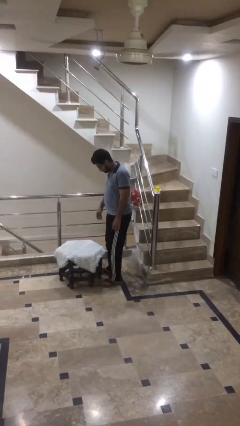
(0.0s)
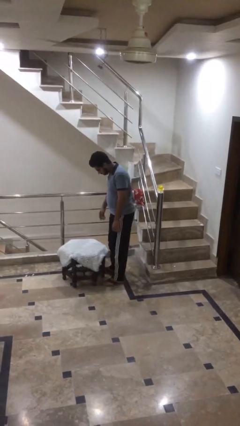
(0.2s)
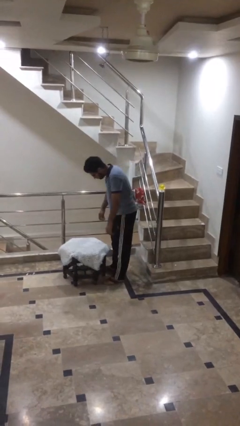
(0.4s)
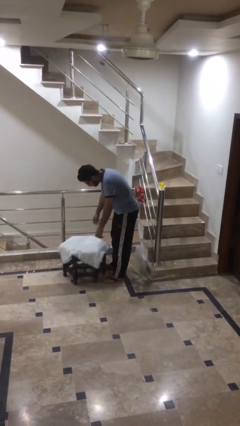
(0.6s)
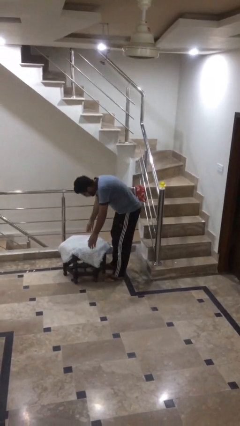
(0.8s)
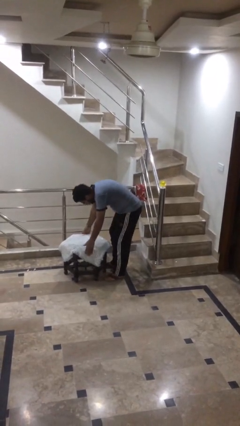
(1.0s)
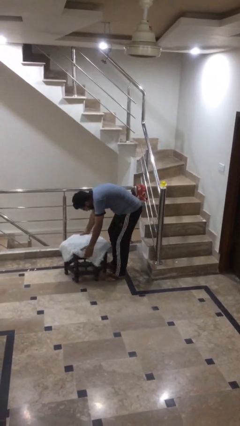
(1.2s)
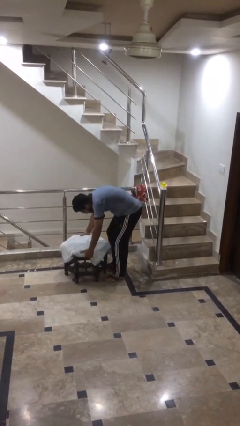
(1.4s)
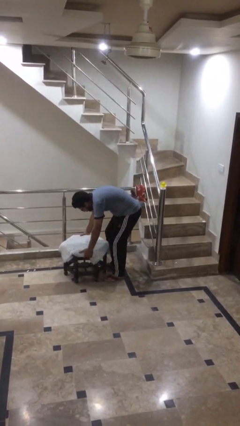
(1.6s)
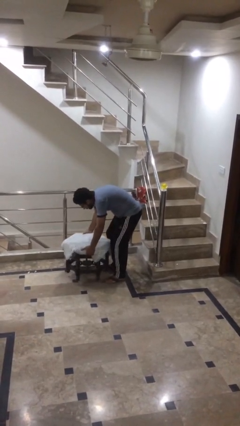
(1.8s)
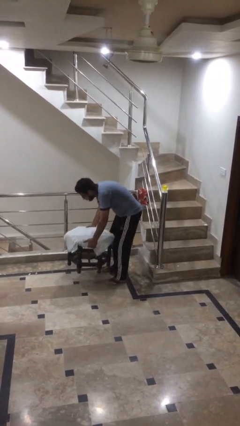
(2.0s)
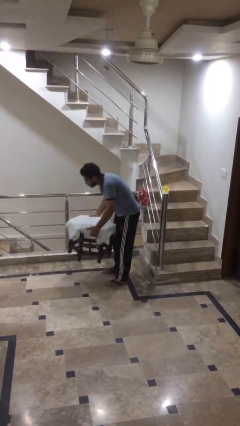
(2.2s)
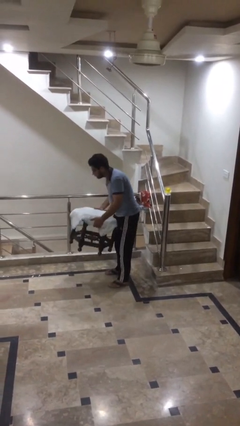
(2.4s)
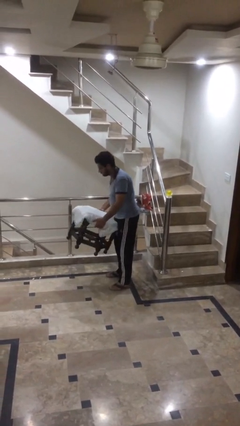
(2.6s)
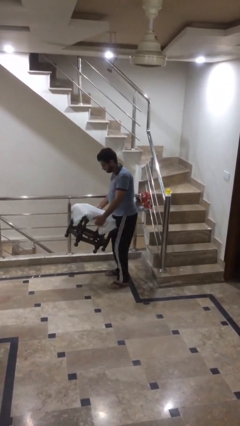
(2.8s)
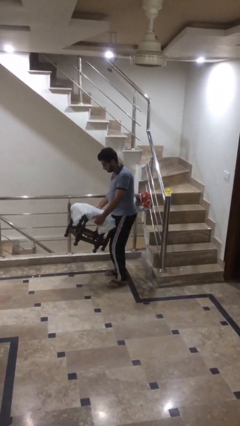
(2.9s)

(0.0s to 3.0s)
person picks up object from floor

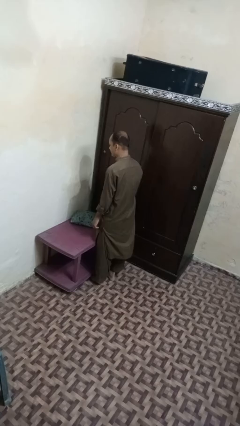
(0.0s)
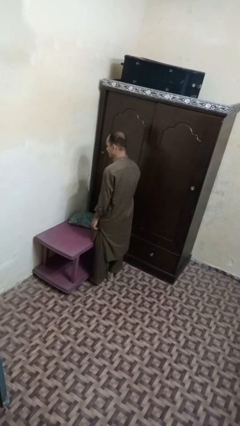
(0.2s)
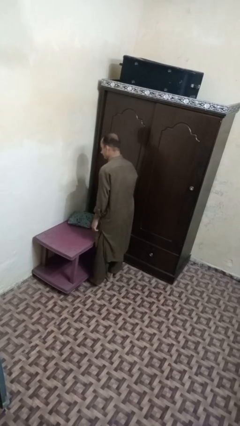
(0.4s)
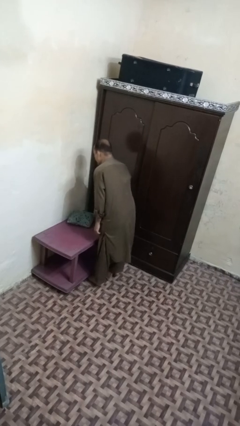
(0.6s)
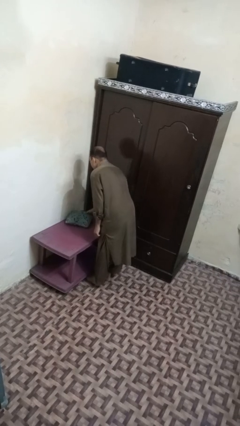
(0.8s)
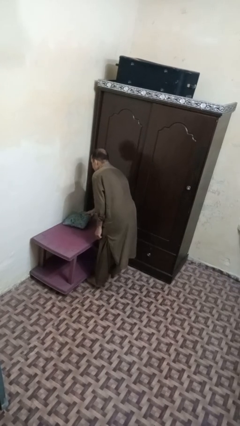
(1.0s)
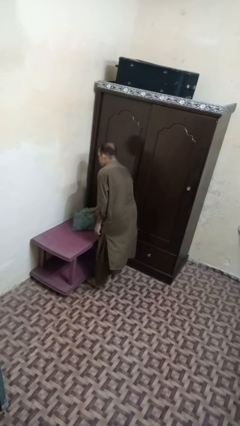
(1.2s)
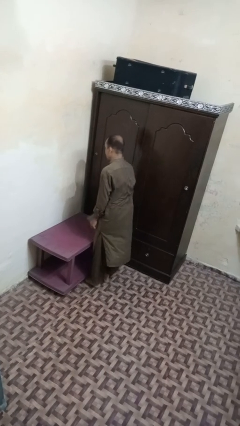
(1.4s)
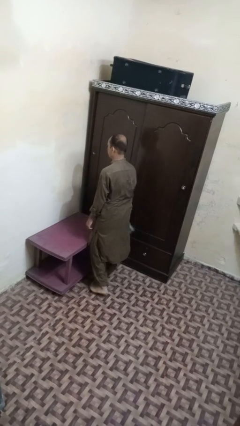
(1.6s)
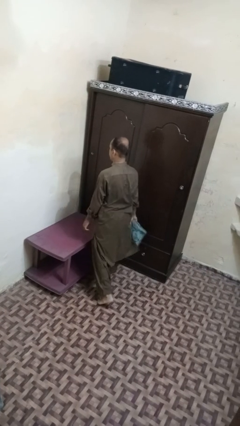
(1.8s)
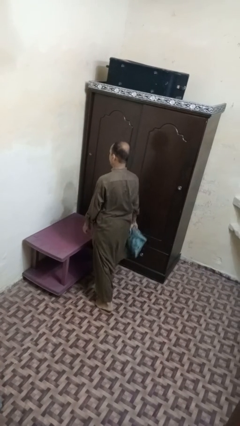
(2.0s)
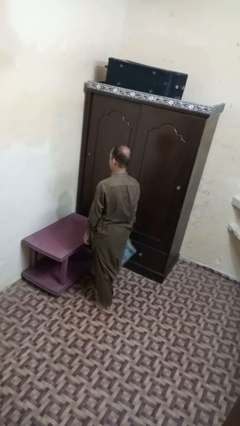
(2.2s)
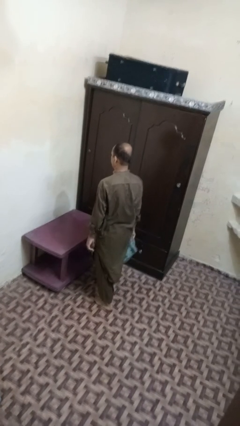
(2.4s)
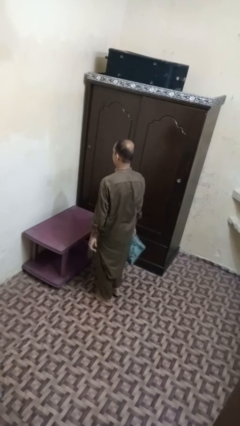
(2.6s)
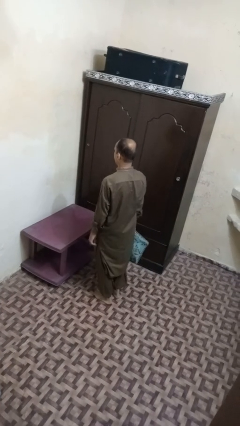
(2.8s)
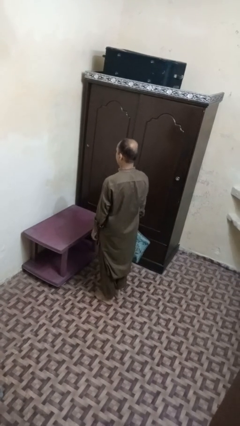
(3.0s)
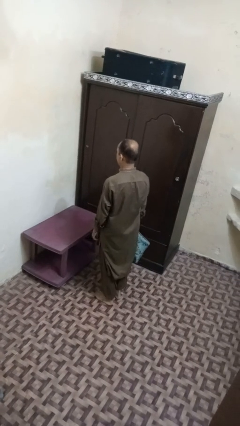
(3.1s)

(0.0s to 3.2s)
person picks up object from table

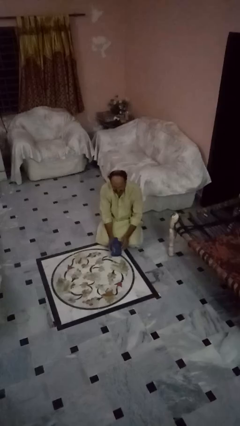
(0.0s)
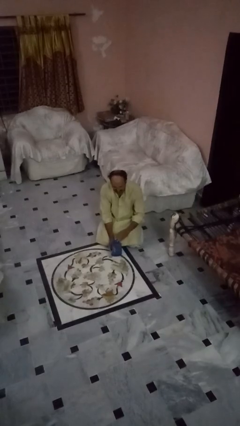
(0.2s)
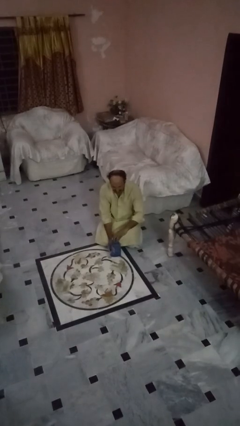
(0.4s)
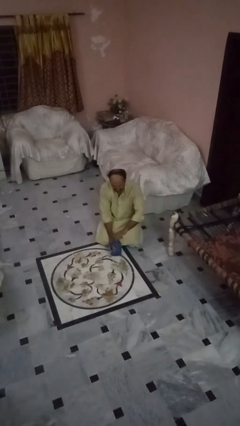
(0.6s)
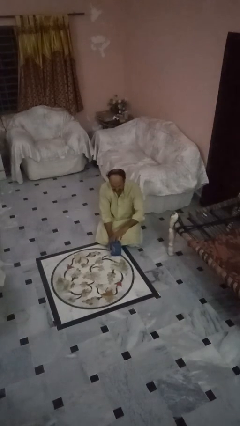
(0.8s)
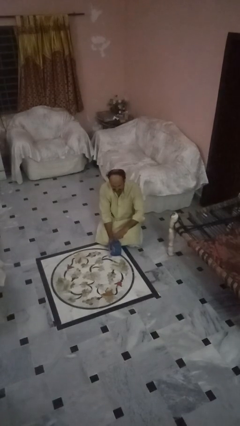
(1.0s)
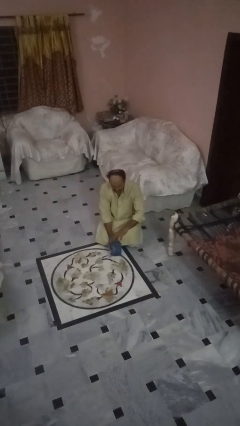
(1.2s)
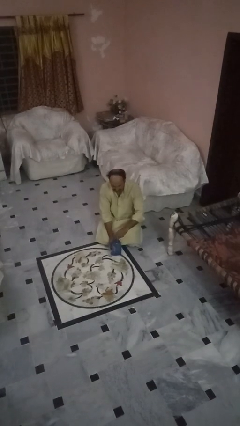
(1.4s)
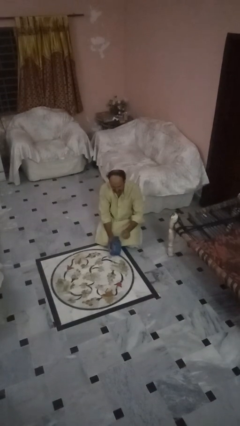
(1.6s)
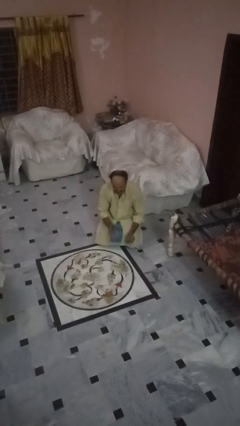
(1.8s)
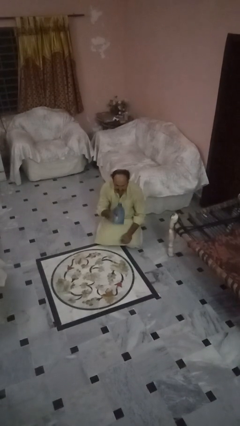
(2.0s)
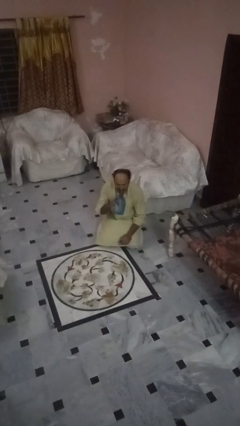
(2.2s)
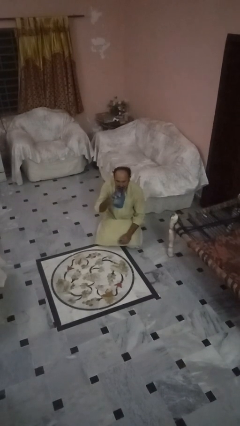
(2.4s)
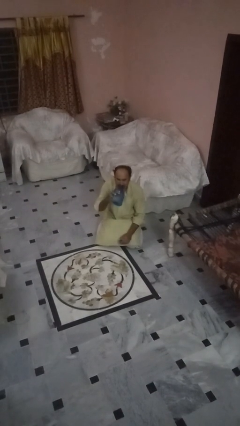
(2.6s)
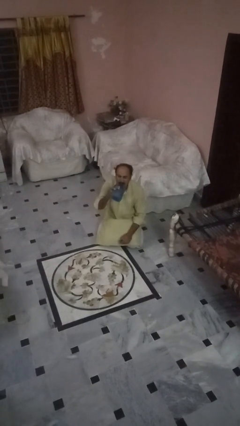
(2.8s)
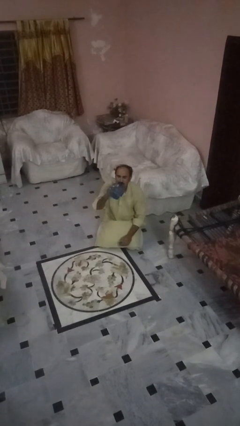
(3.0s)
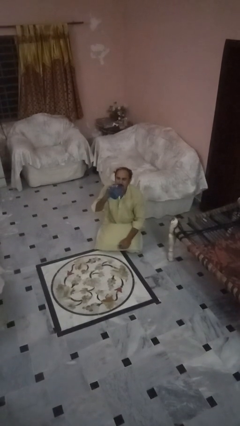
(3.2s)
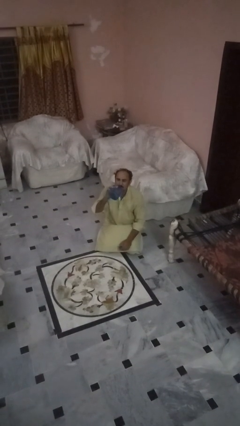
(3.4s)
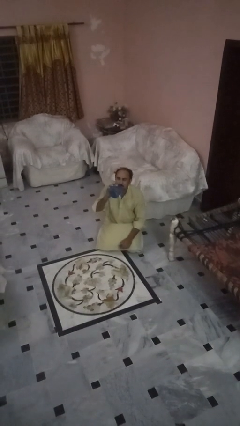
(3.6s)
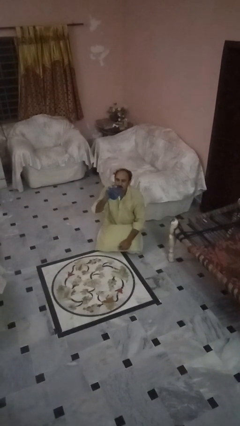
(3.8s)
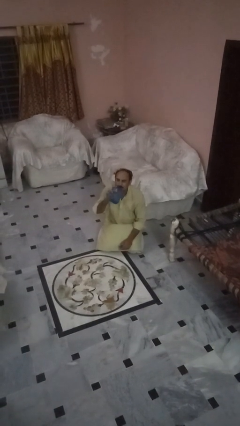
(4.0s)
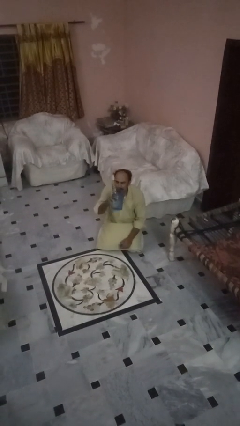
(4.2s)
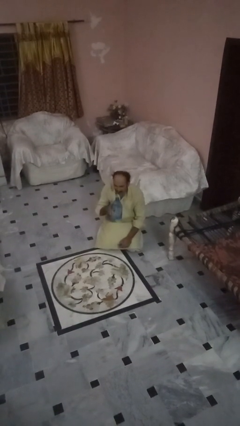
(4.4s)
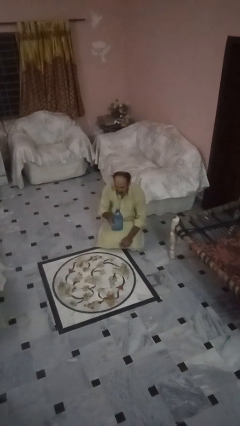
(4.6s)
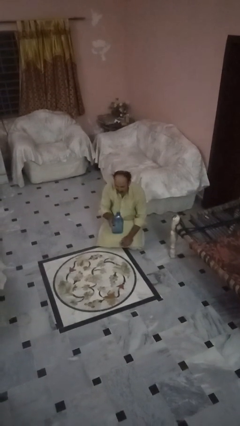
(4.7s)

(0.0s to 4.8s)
person drinks from bottle

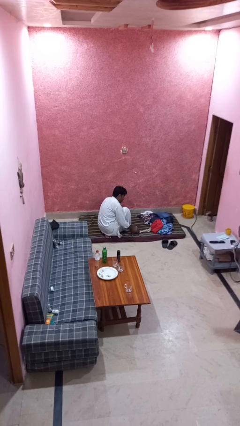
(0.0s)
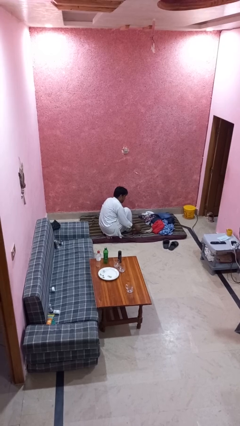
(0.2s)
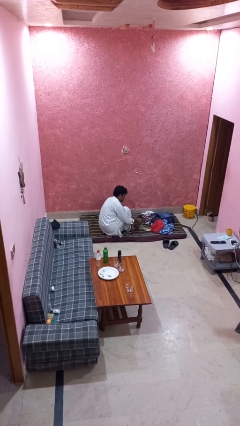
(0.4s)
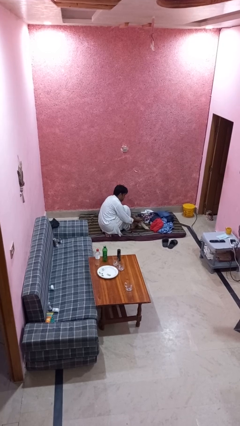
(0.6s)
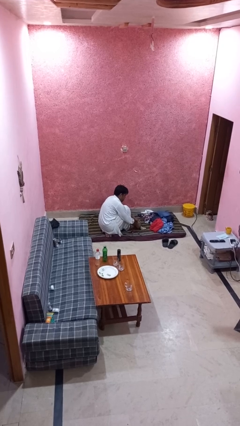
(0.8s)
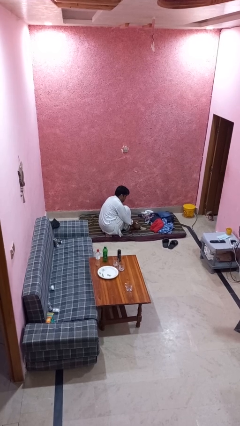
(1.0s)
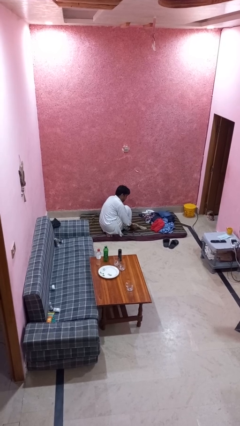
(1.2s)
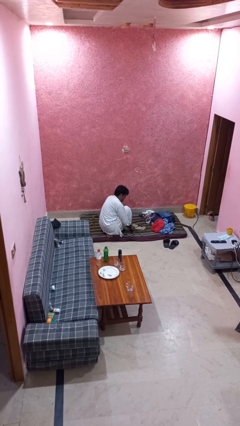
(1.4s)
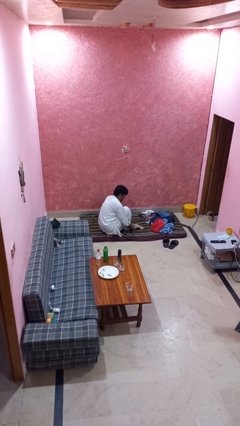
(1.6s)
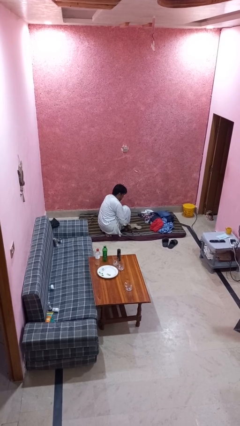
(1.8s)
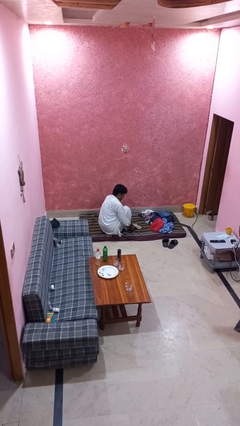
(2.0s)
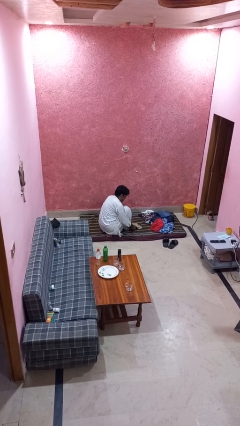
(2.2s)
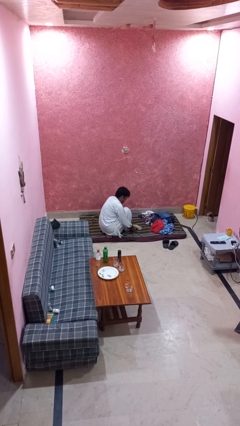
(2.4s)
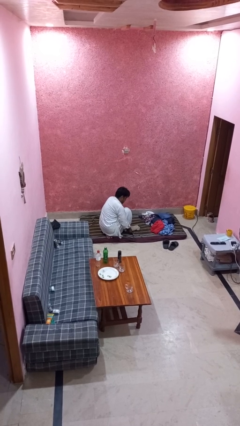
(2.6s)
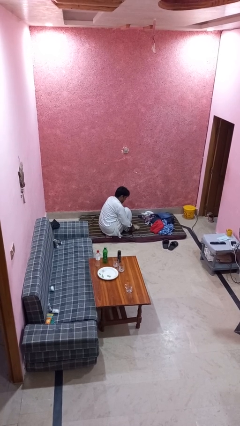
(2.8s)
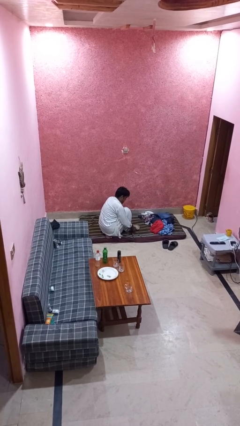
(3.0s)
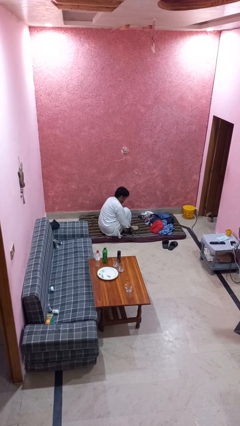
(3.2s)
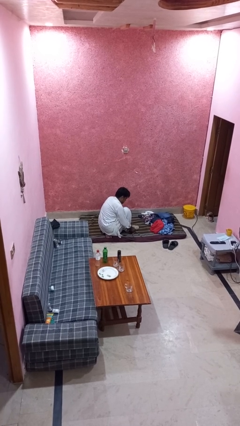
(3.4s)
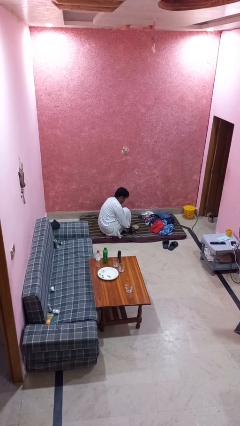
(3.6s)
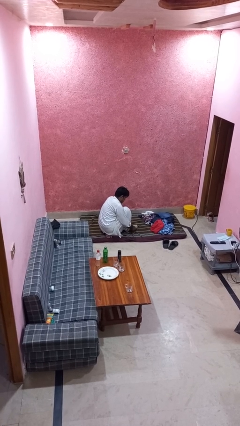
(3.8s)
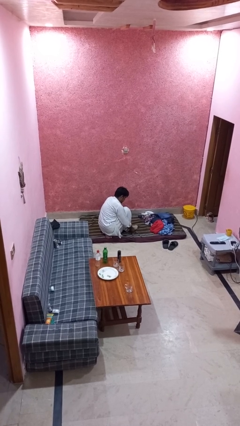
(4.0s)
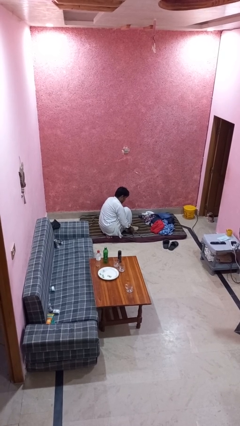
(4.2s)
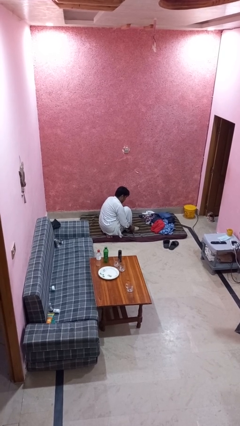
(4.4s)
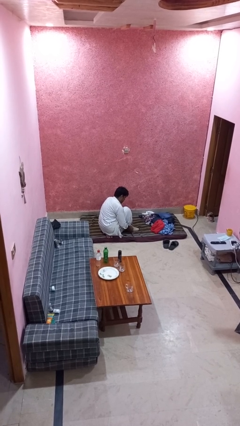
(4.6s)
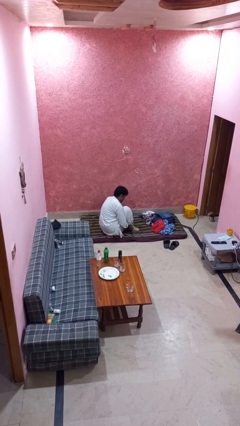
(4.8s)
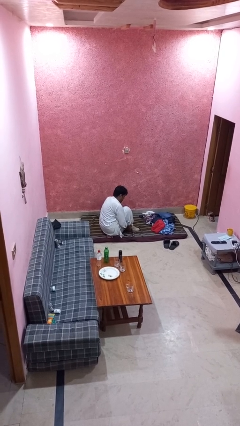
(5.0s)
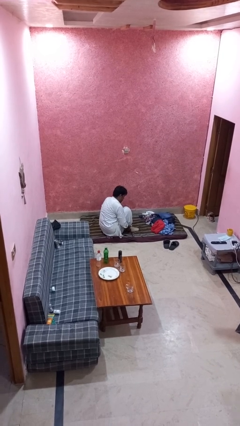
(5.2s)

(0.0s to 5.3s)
person puts on socks

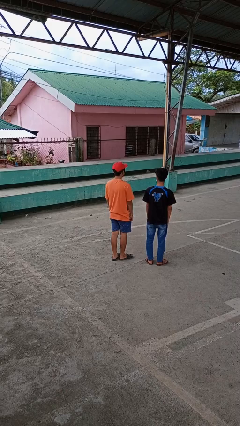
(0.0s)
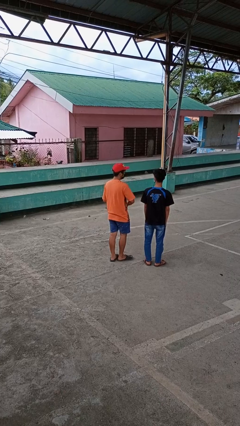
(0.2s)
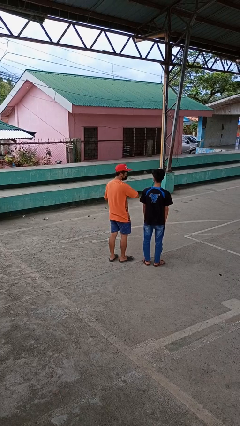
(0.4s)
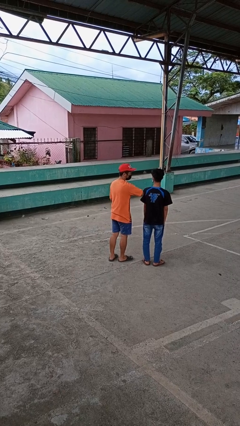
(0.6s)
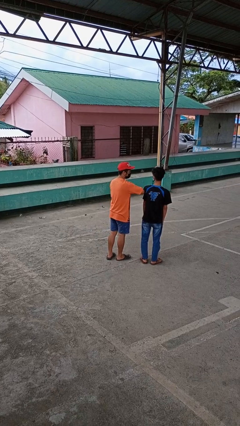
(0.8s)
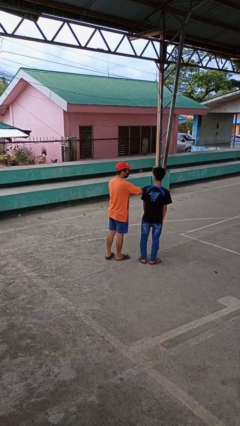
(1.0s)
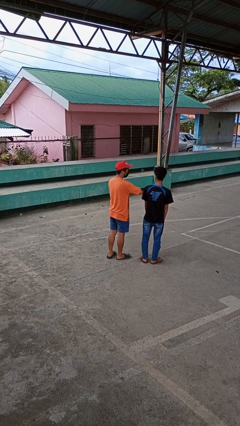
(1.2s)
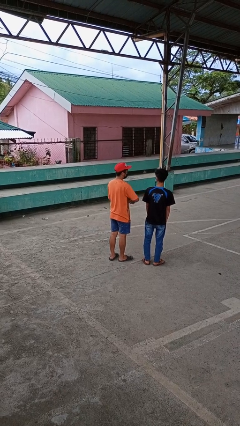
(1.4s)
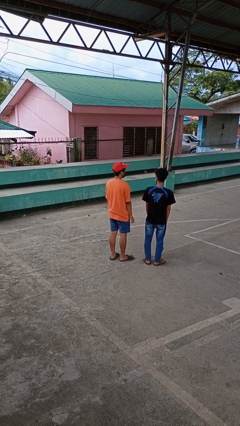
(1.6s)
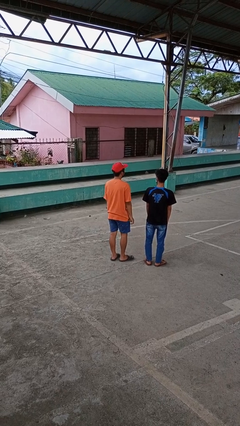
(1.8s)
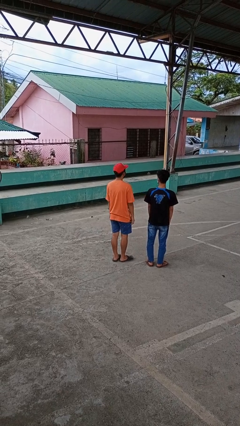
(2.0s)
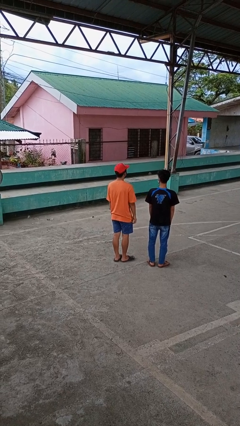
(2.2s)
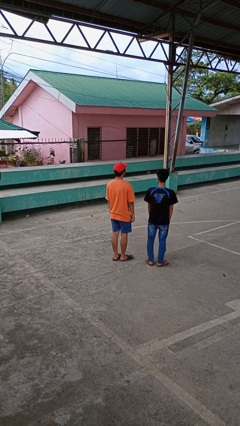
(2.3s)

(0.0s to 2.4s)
person nudges person with elbow
